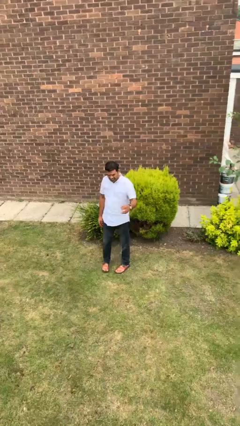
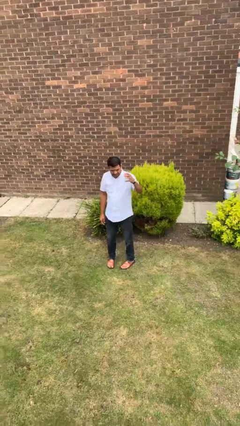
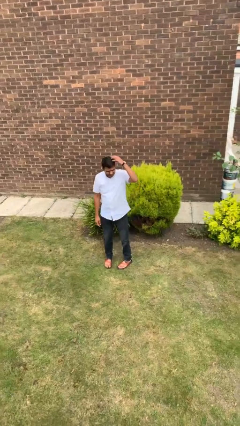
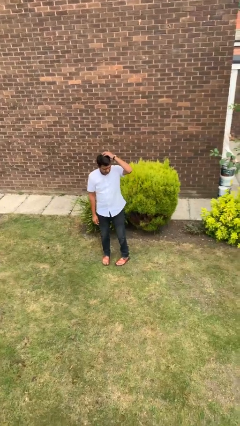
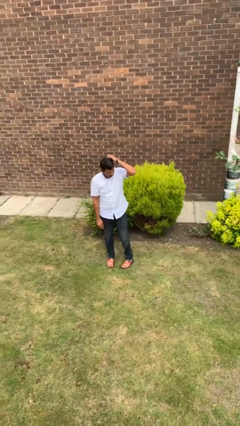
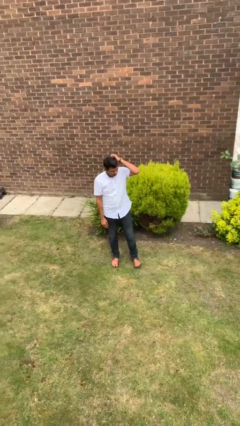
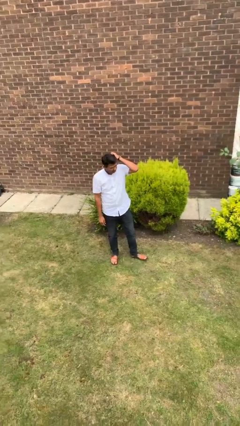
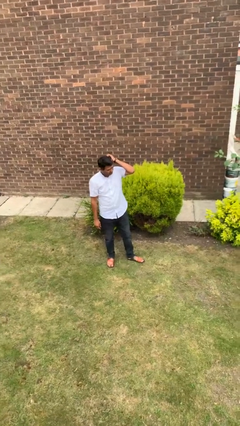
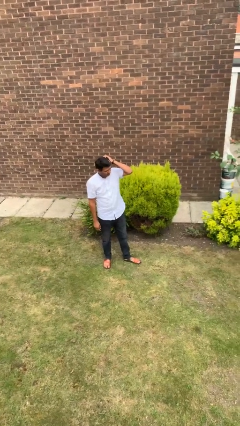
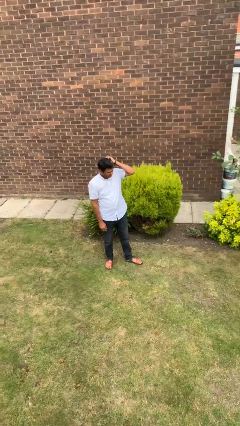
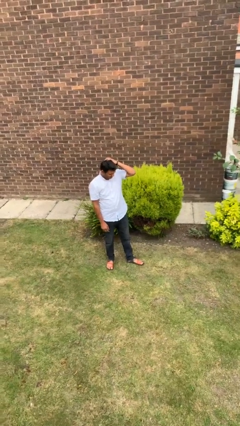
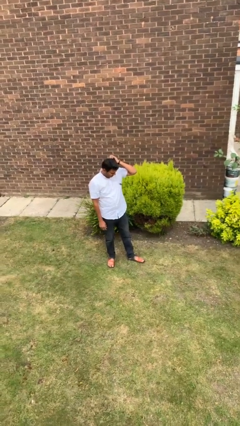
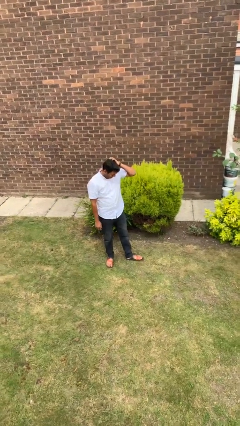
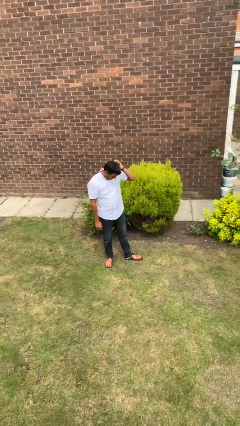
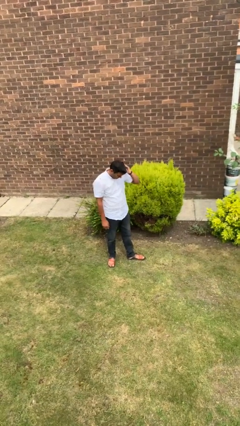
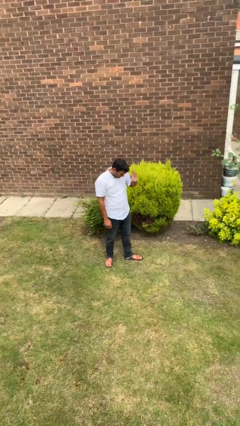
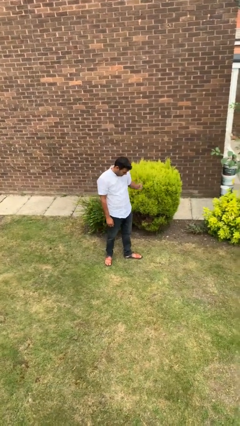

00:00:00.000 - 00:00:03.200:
person scratches face

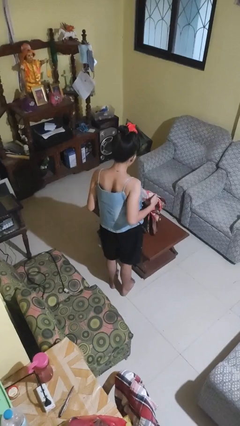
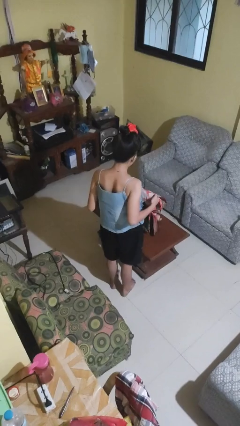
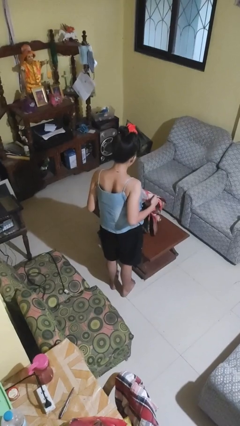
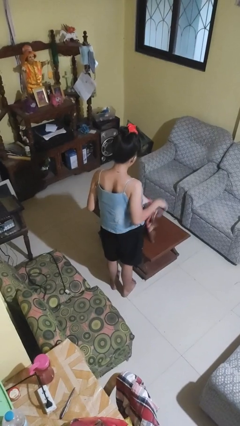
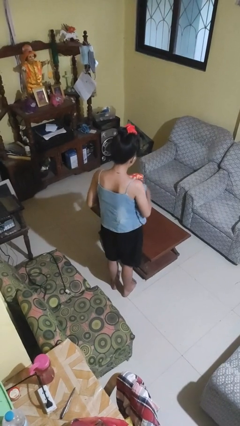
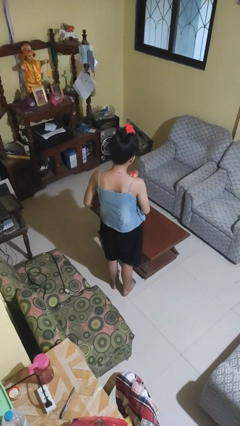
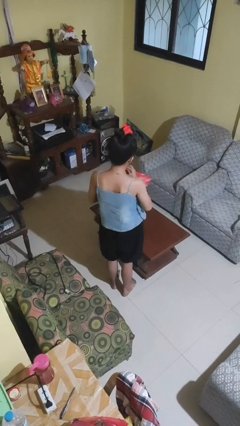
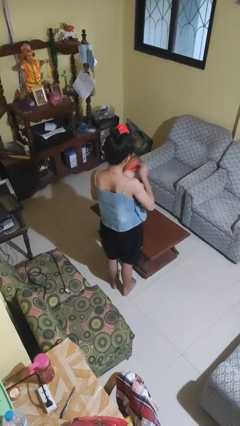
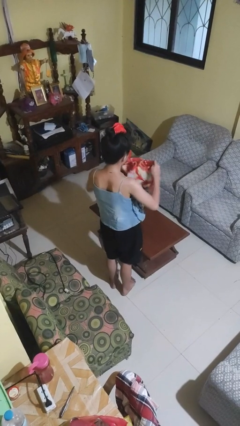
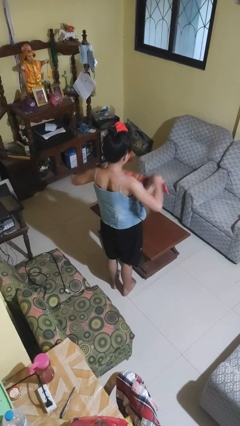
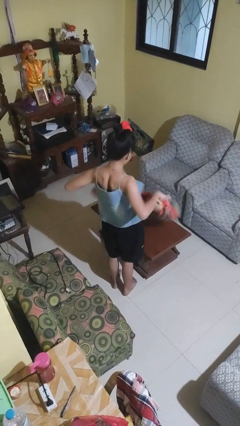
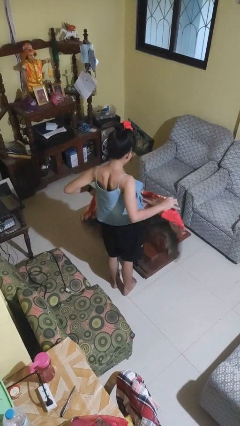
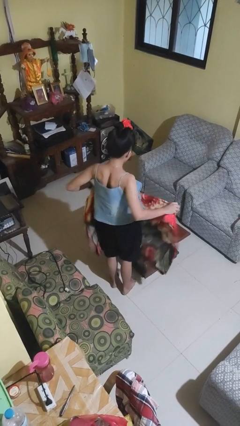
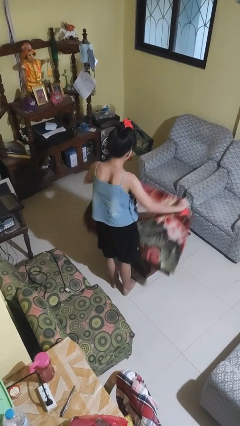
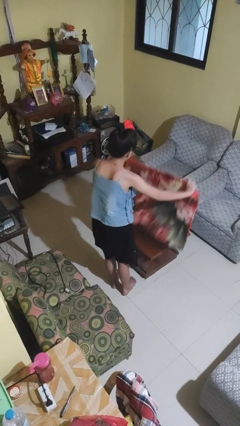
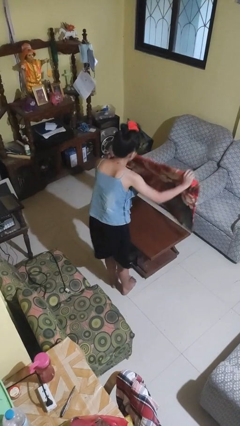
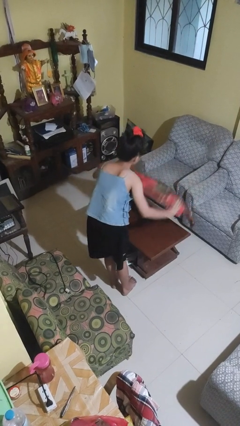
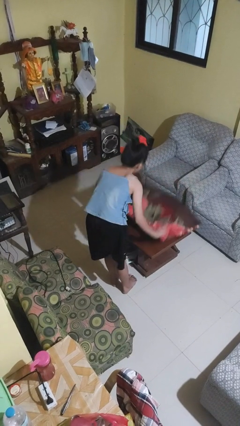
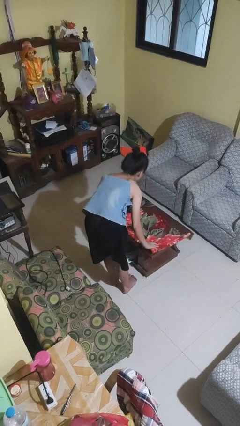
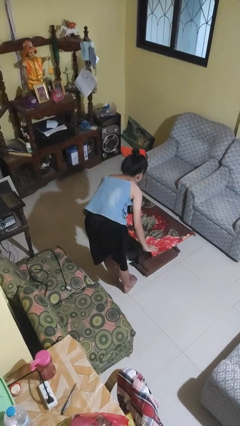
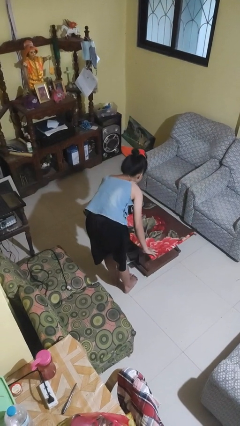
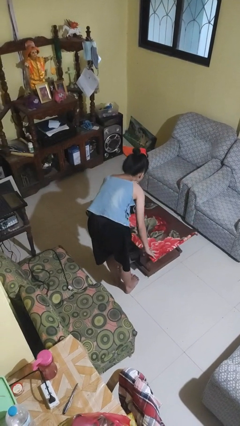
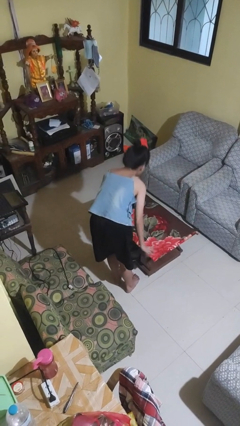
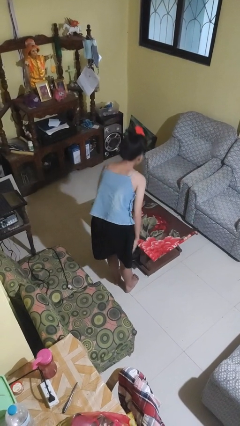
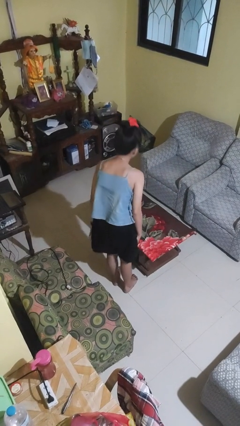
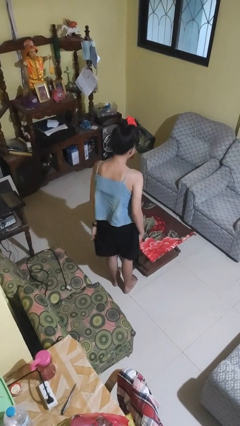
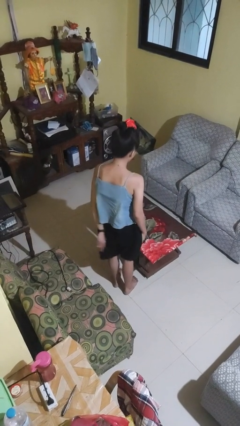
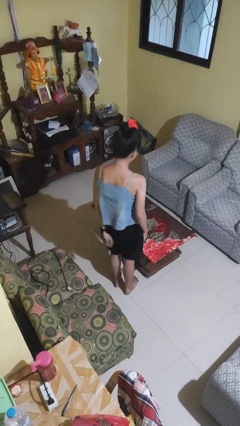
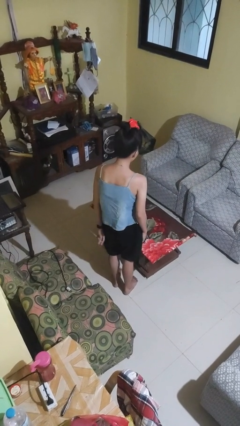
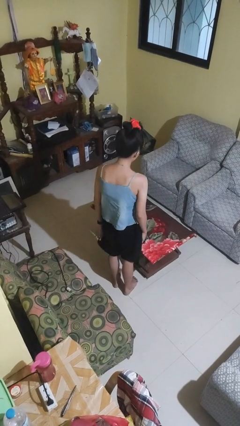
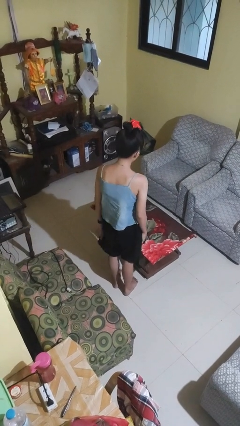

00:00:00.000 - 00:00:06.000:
person spreads tablecloth

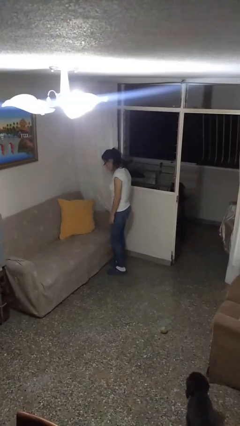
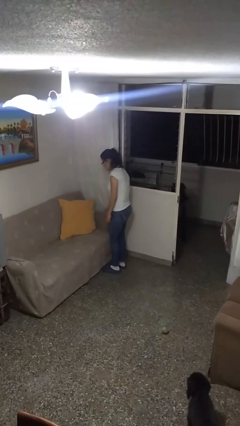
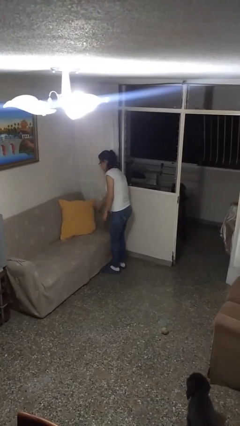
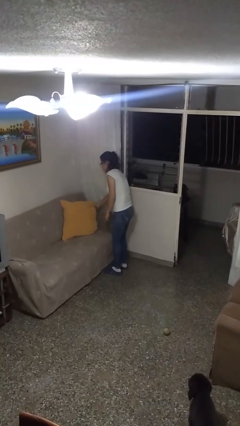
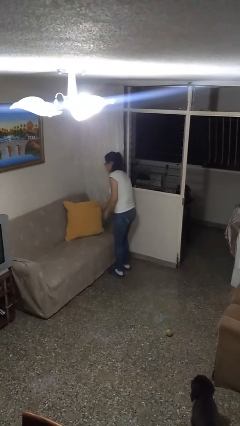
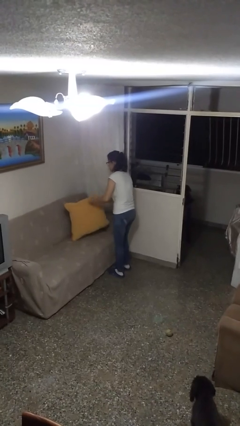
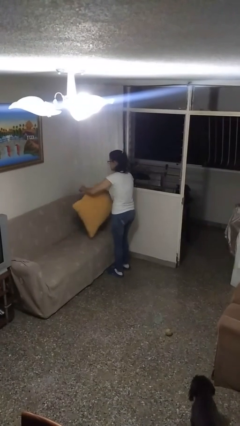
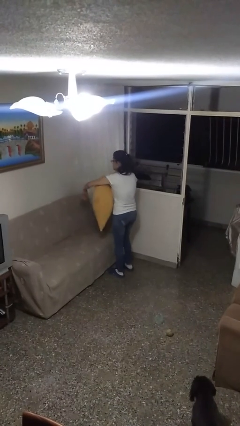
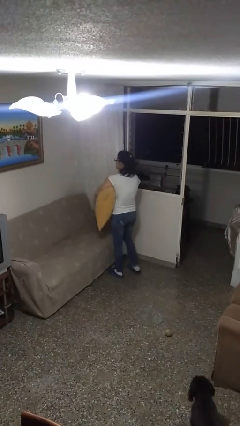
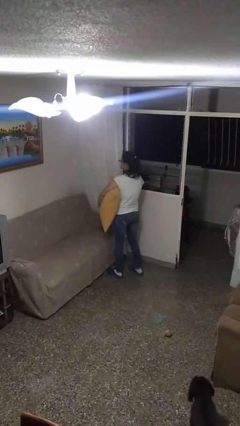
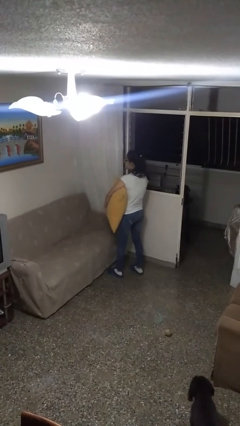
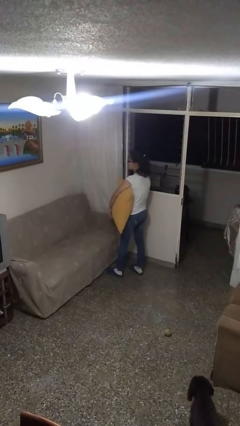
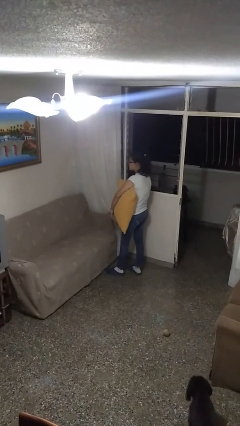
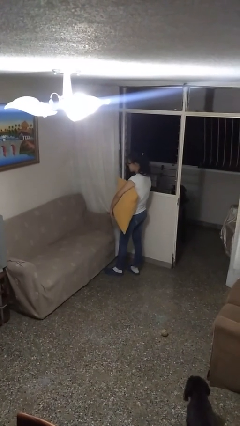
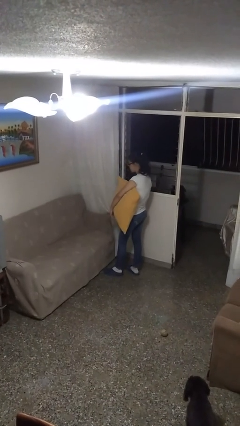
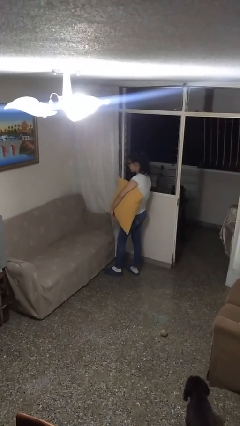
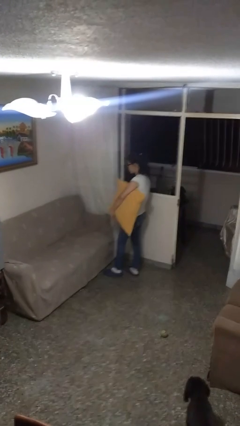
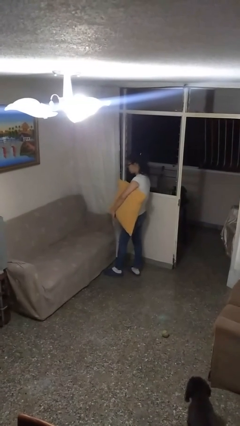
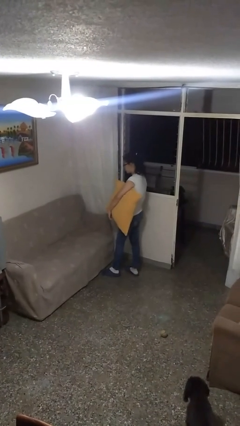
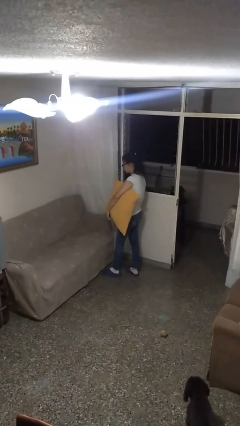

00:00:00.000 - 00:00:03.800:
person picks up object from couch

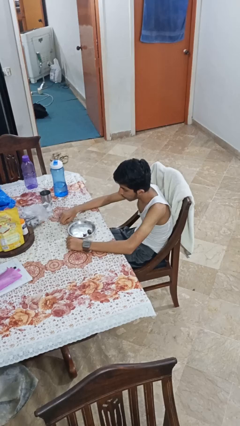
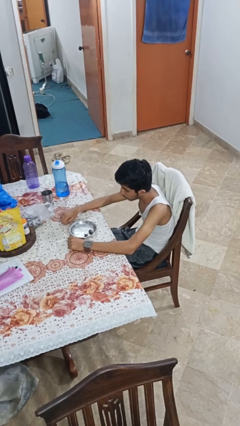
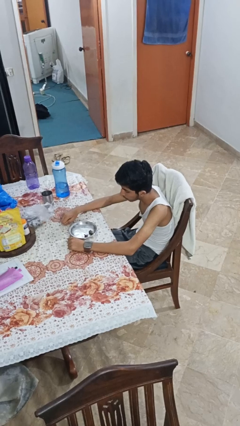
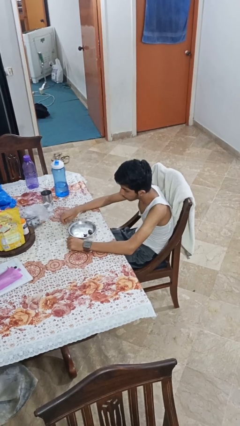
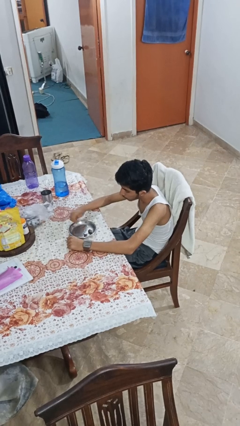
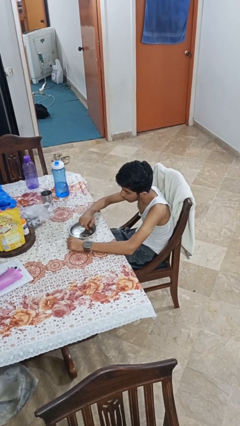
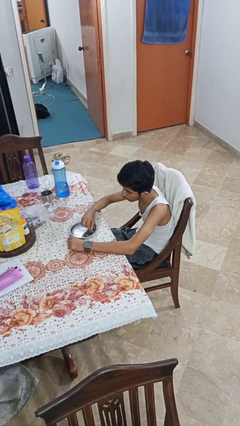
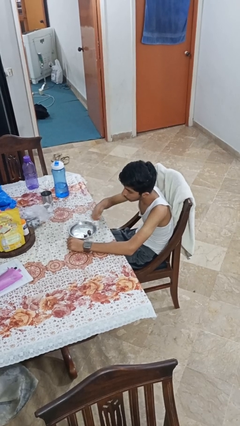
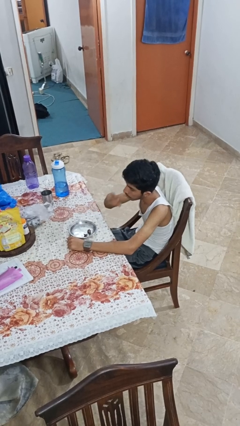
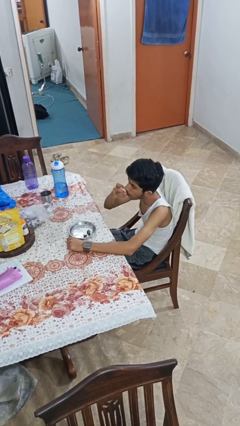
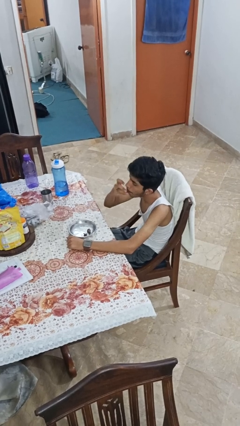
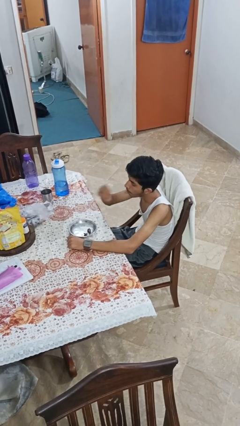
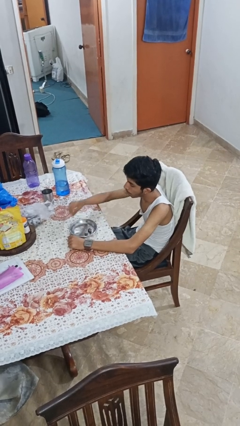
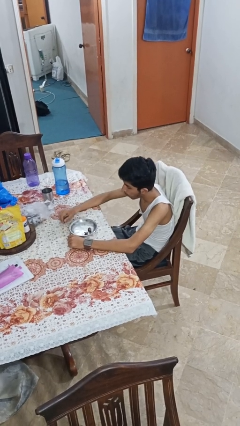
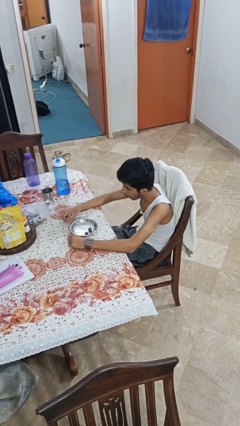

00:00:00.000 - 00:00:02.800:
person eats with hands

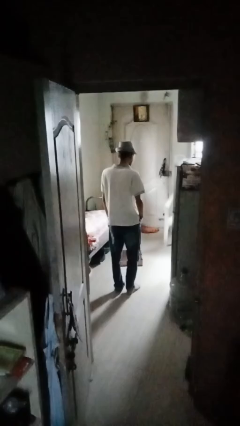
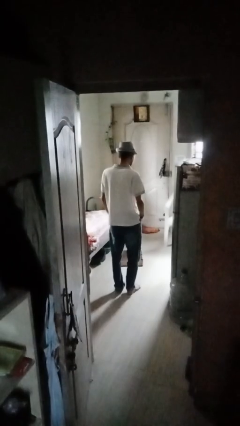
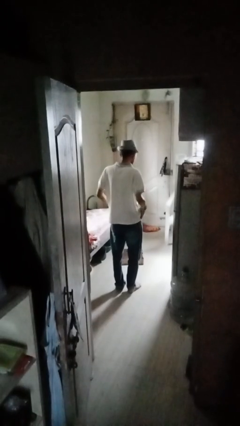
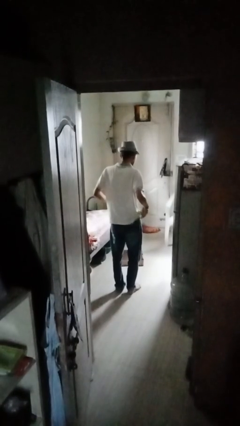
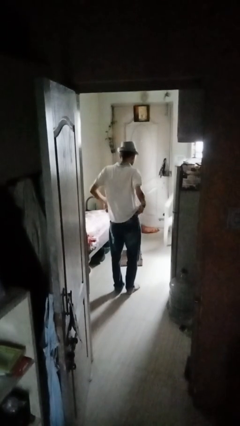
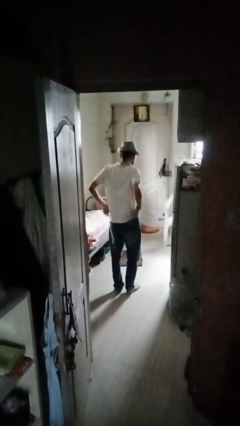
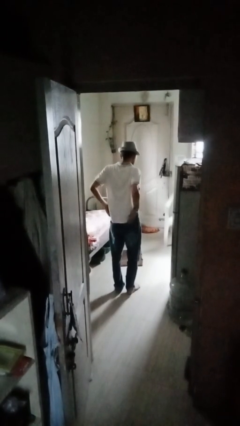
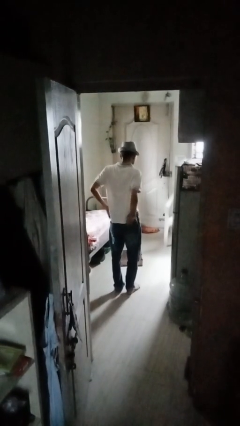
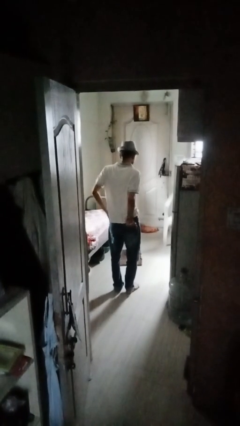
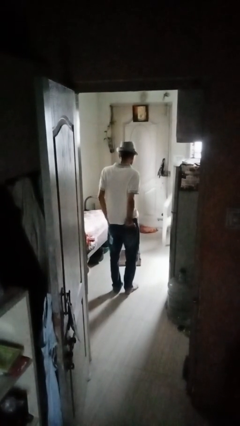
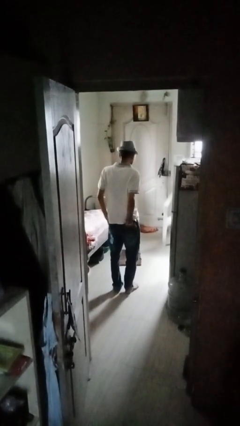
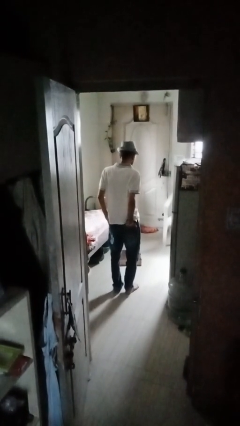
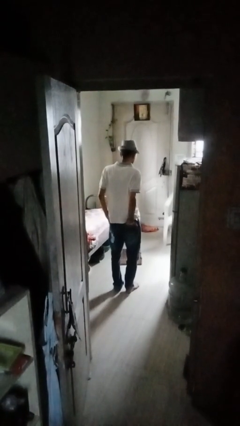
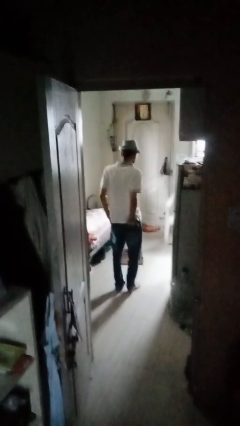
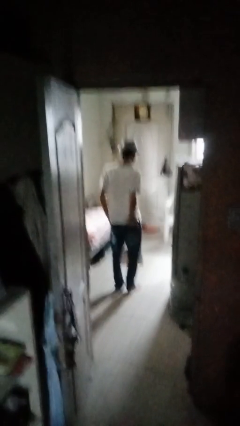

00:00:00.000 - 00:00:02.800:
person puts hands in back pockets
